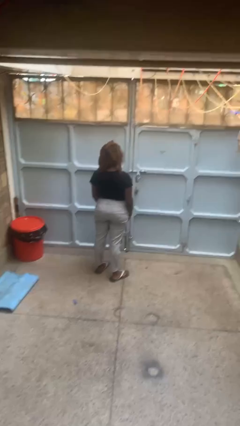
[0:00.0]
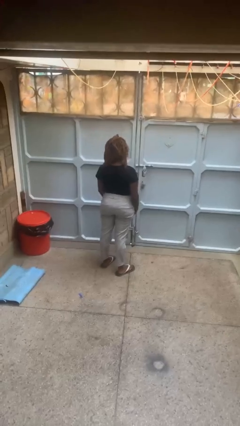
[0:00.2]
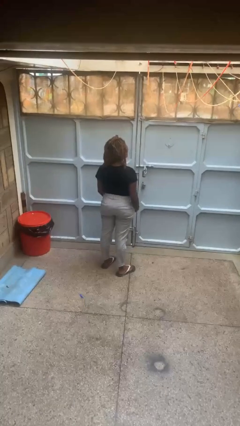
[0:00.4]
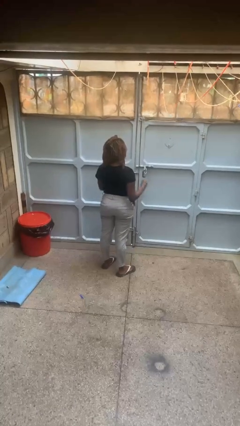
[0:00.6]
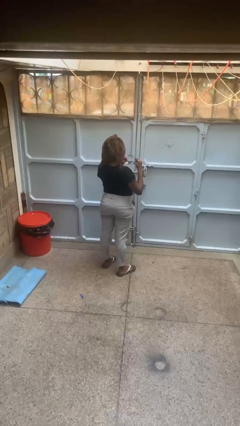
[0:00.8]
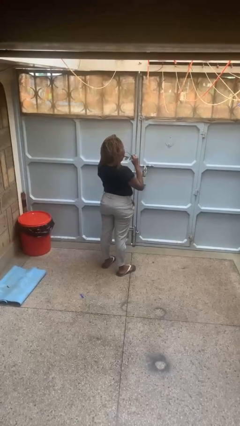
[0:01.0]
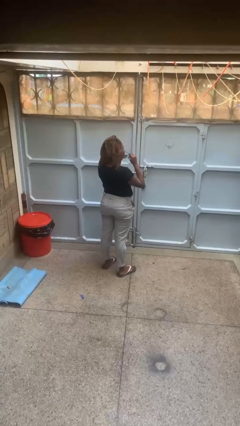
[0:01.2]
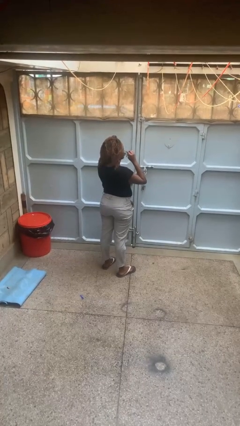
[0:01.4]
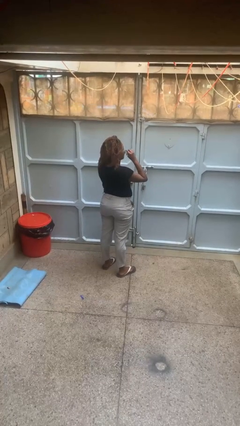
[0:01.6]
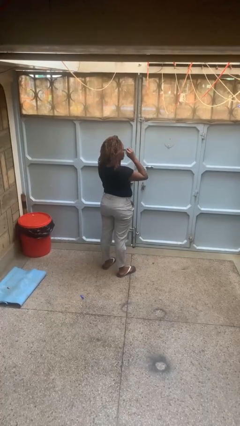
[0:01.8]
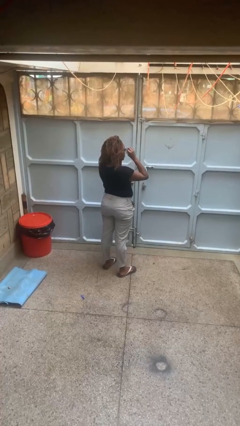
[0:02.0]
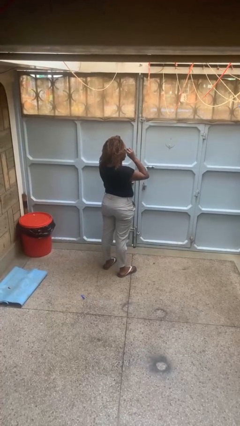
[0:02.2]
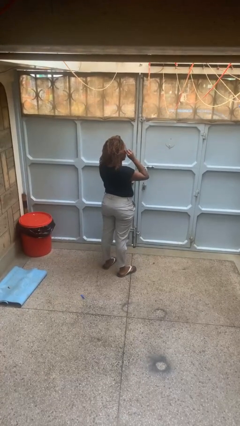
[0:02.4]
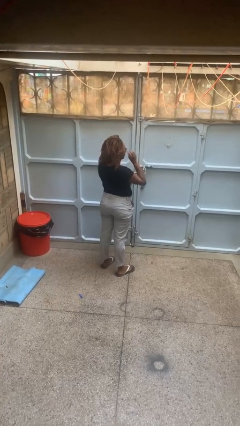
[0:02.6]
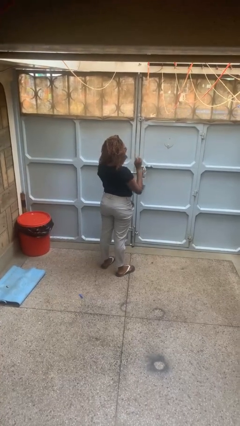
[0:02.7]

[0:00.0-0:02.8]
person puts on glasses

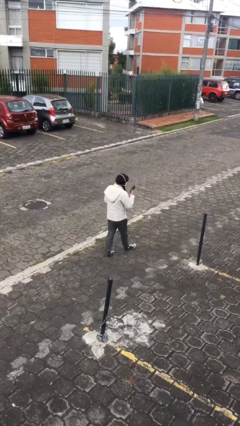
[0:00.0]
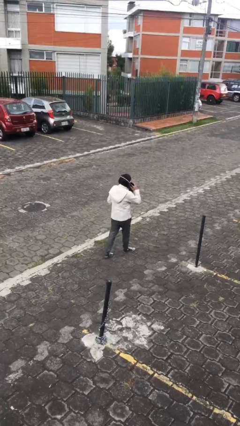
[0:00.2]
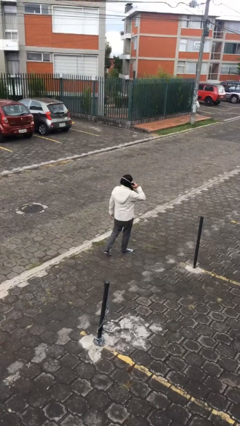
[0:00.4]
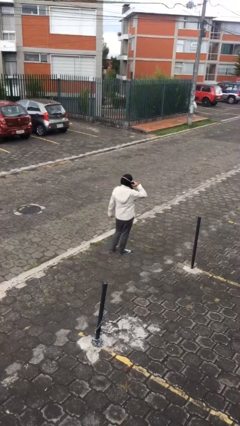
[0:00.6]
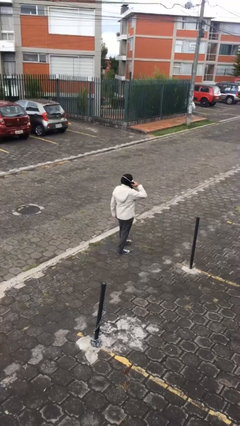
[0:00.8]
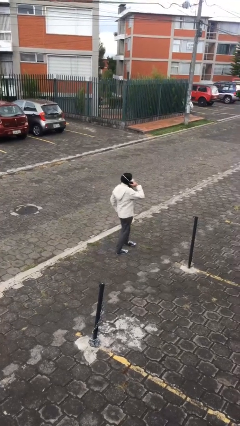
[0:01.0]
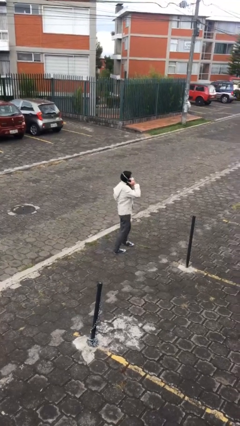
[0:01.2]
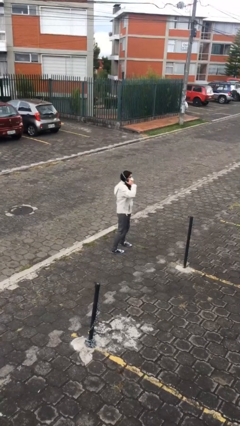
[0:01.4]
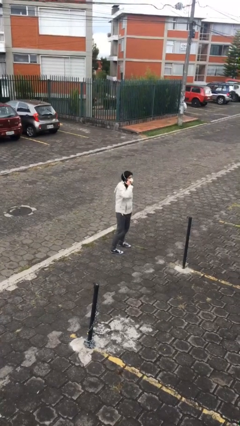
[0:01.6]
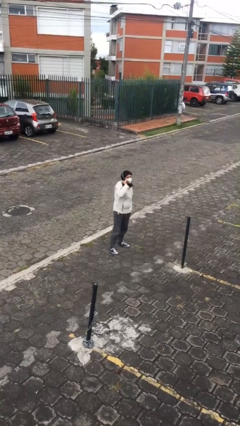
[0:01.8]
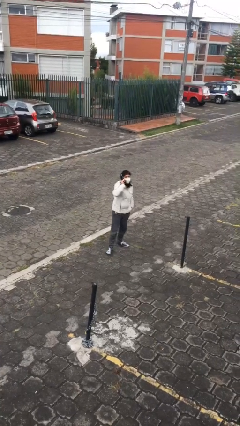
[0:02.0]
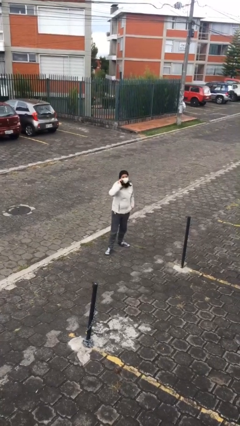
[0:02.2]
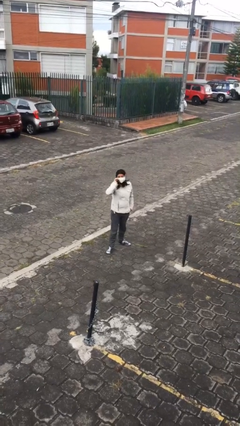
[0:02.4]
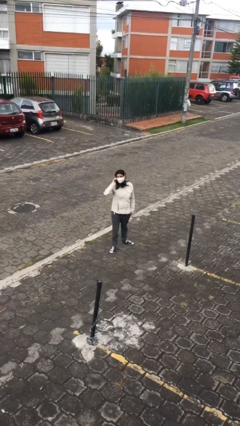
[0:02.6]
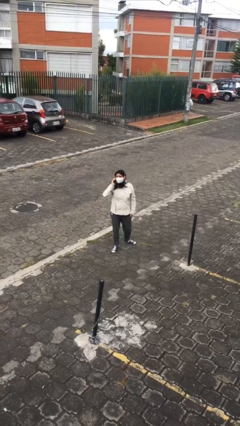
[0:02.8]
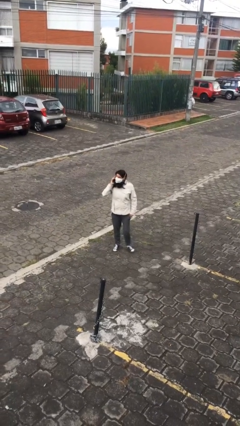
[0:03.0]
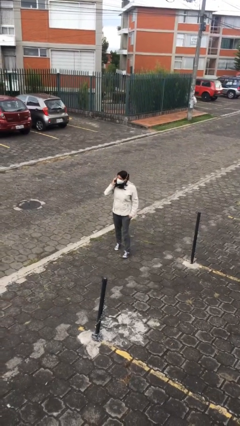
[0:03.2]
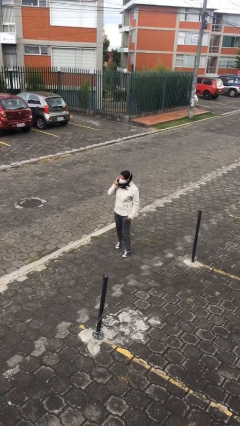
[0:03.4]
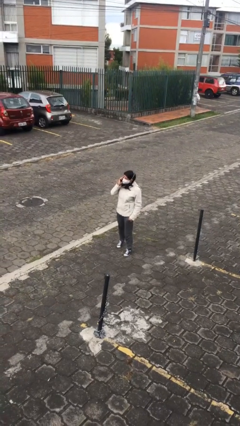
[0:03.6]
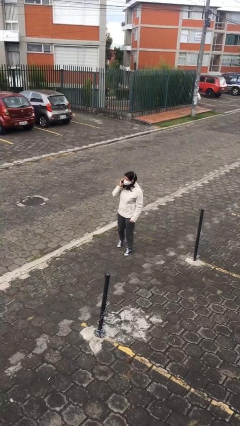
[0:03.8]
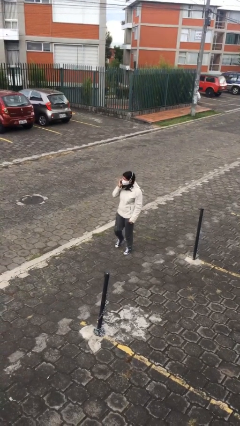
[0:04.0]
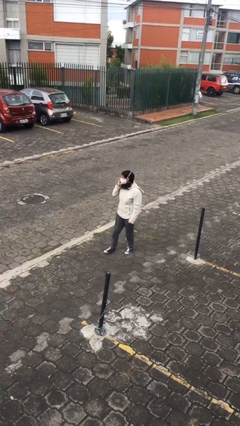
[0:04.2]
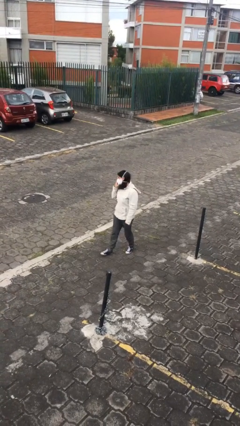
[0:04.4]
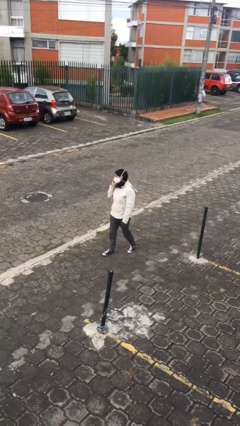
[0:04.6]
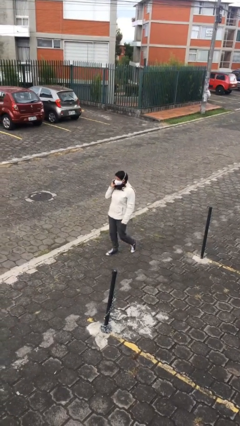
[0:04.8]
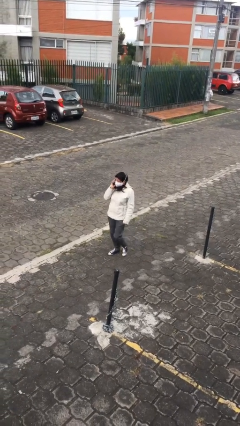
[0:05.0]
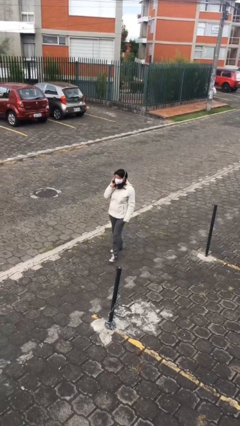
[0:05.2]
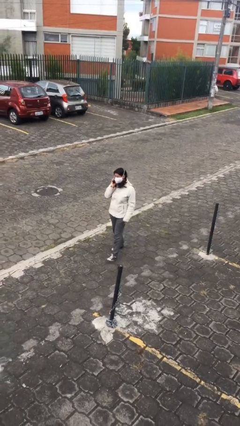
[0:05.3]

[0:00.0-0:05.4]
person talks on phone

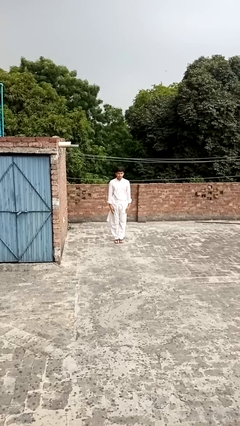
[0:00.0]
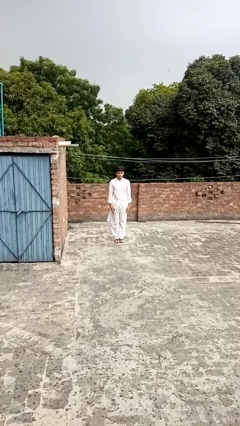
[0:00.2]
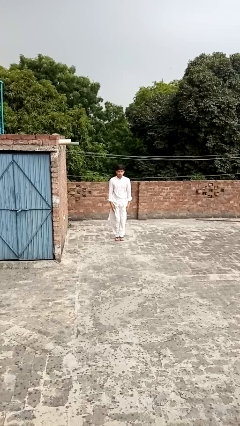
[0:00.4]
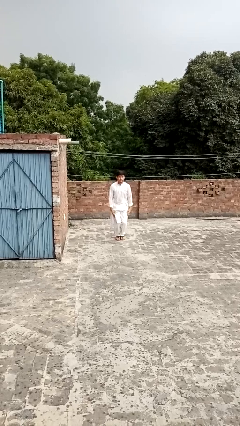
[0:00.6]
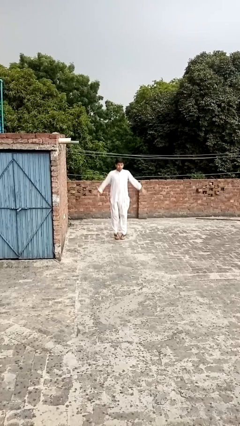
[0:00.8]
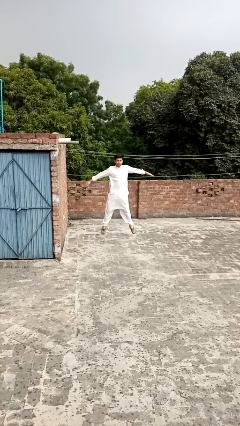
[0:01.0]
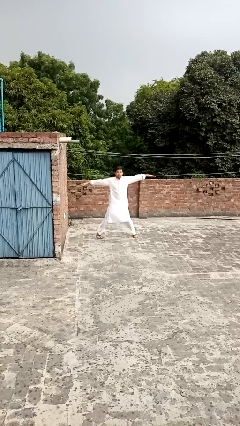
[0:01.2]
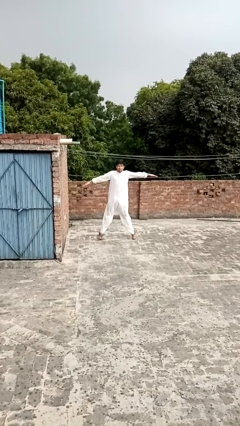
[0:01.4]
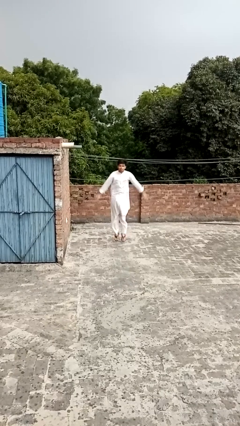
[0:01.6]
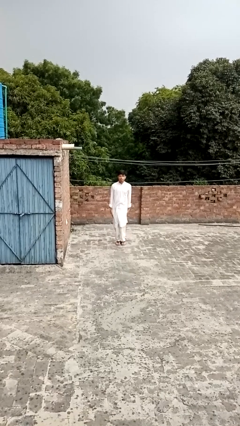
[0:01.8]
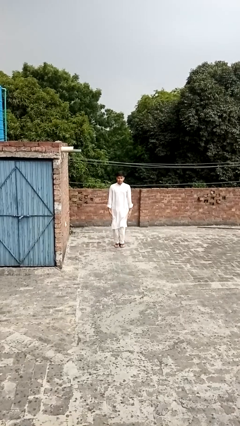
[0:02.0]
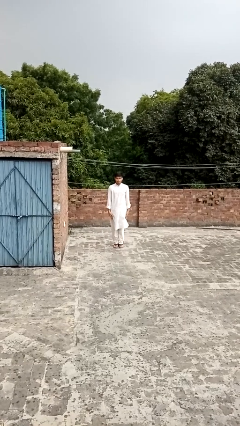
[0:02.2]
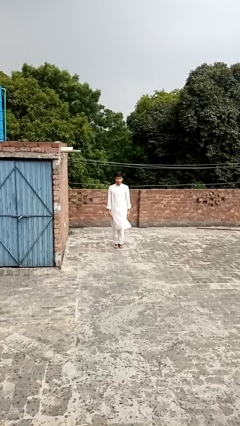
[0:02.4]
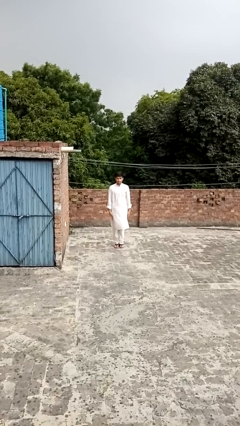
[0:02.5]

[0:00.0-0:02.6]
person exercises with jumping jacks

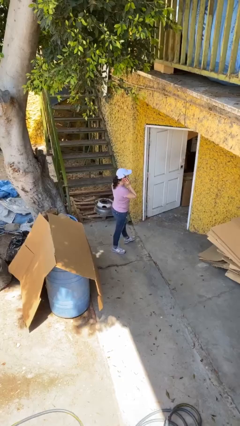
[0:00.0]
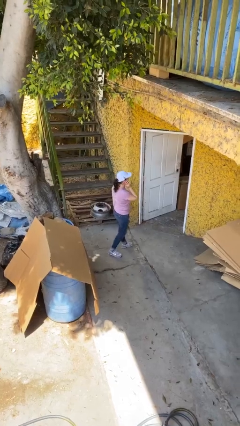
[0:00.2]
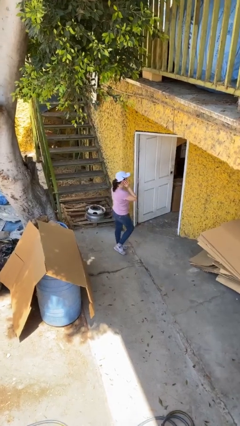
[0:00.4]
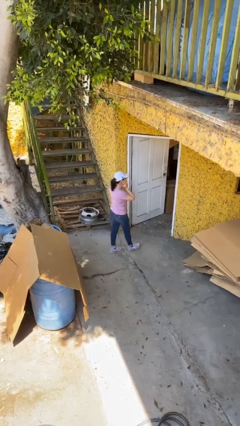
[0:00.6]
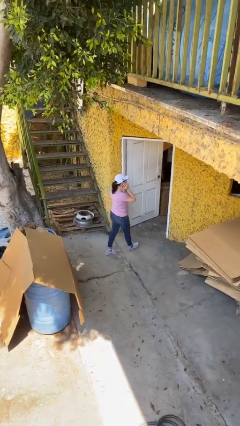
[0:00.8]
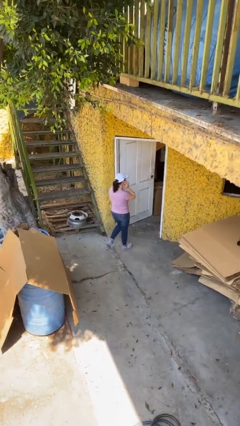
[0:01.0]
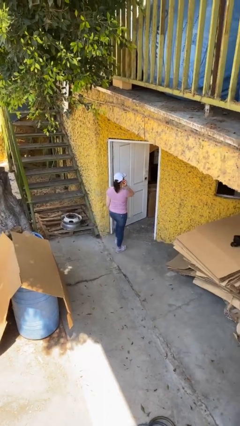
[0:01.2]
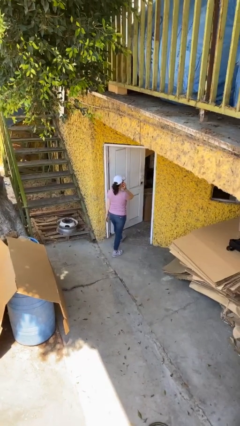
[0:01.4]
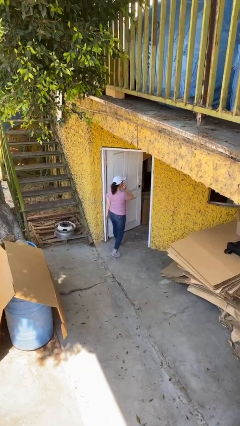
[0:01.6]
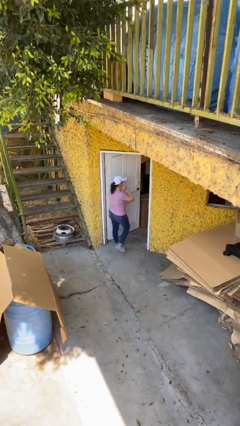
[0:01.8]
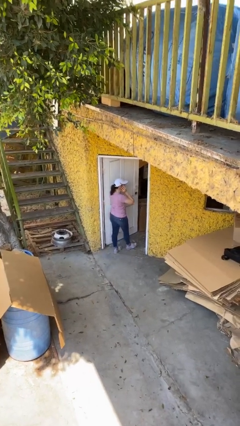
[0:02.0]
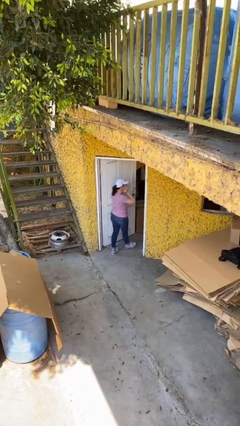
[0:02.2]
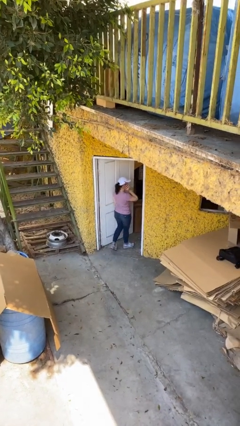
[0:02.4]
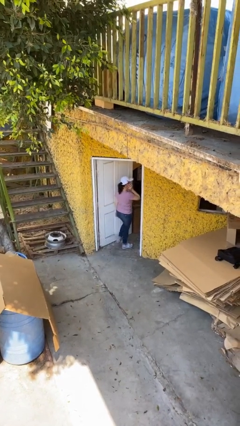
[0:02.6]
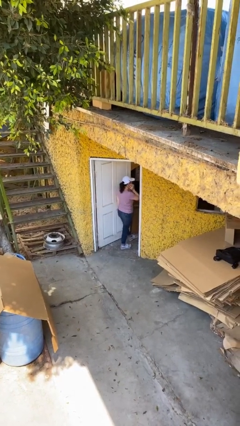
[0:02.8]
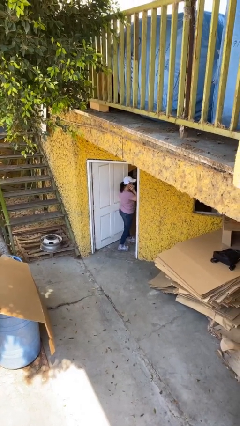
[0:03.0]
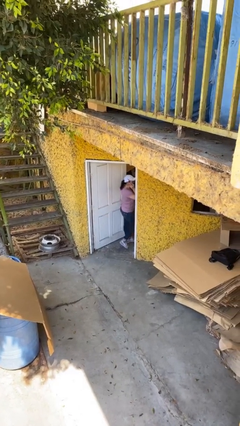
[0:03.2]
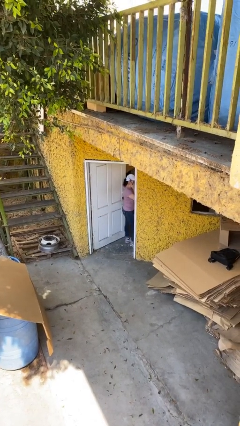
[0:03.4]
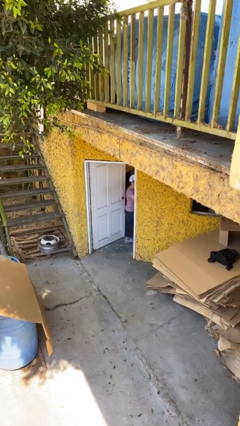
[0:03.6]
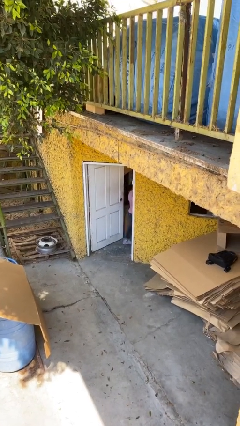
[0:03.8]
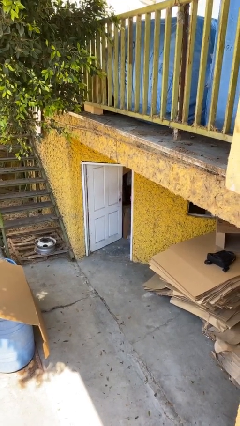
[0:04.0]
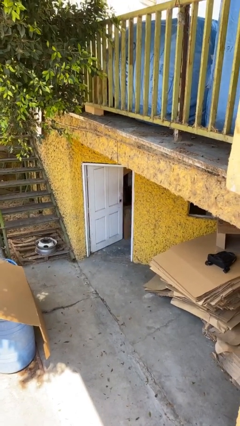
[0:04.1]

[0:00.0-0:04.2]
person exits scene through structure

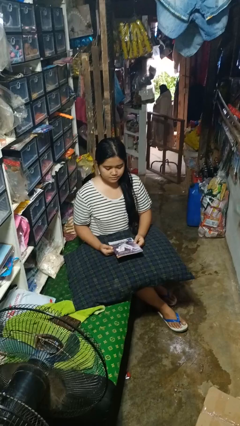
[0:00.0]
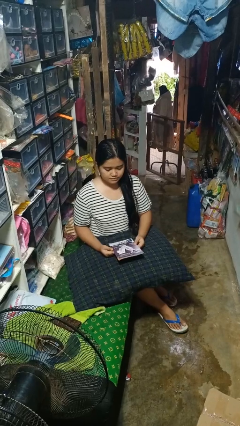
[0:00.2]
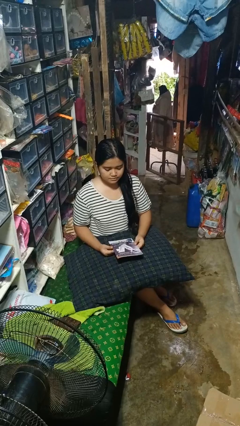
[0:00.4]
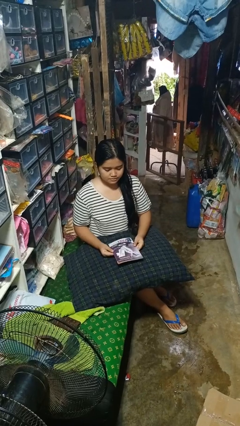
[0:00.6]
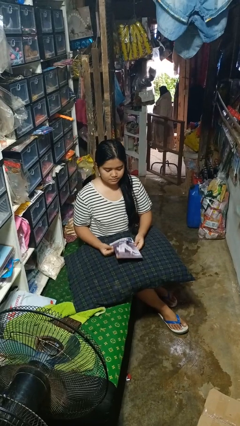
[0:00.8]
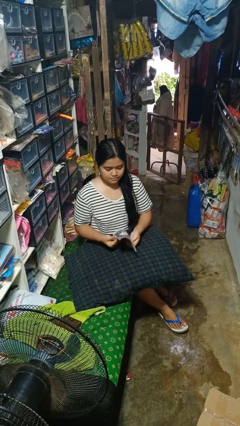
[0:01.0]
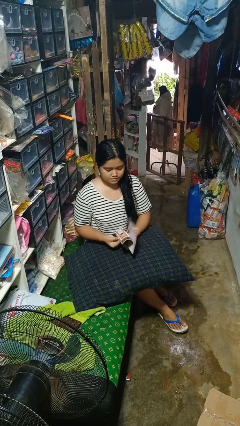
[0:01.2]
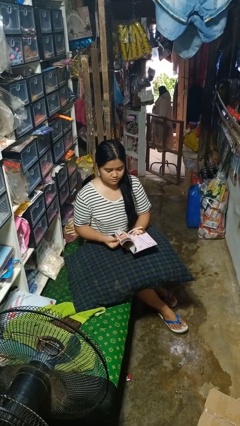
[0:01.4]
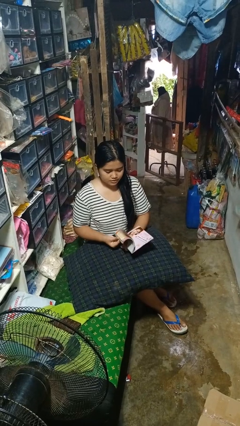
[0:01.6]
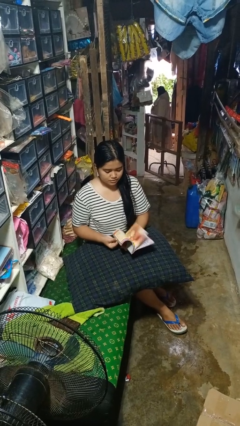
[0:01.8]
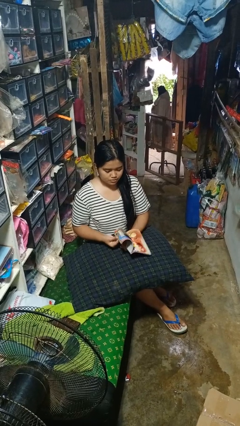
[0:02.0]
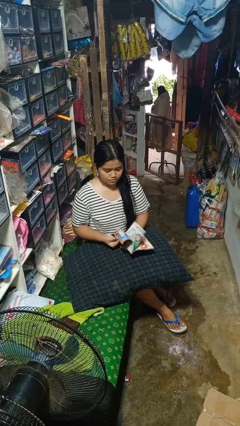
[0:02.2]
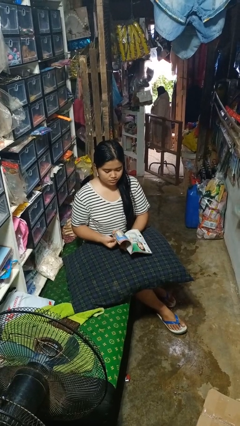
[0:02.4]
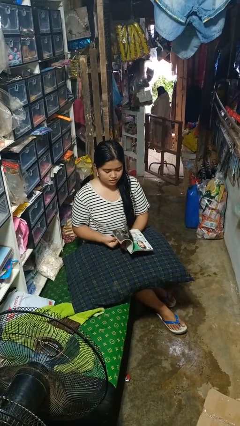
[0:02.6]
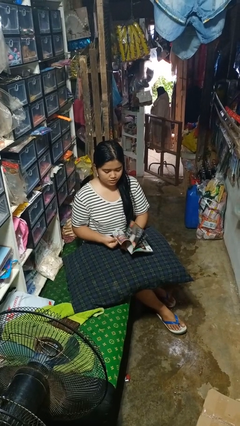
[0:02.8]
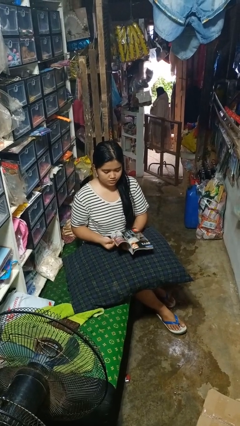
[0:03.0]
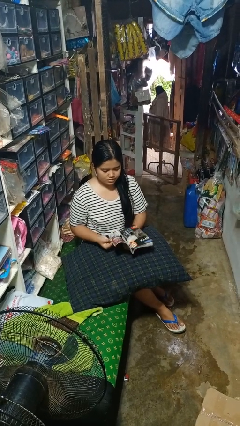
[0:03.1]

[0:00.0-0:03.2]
person reads magazine
